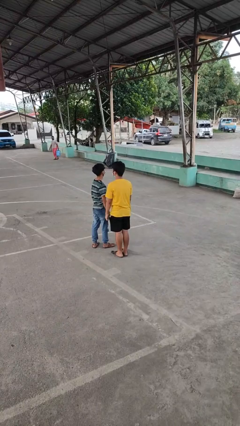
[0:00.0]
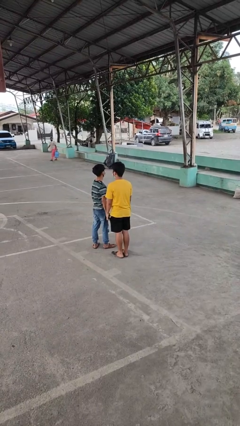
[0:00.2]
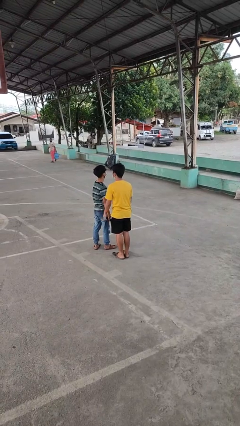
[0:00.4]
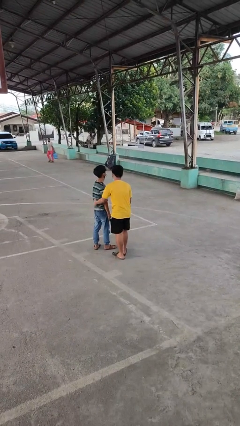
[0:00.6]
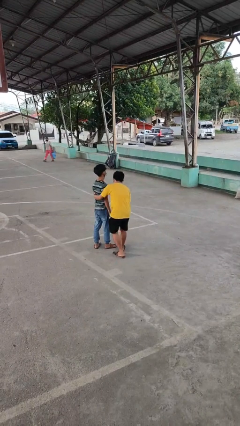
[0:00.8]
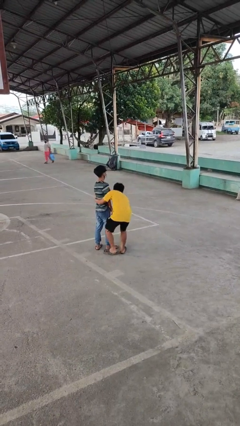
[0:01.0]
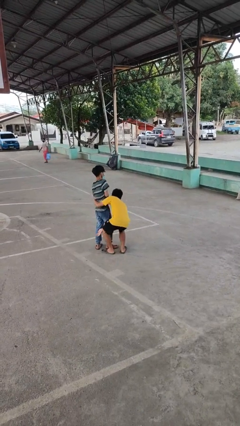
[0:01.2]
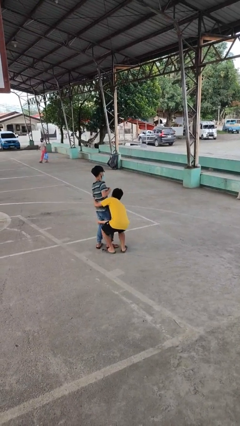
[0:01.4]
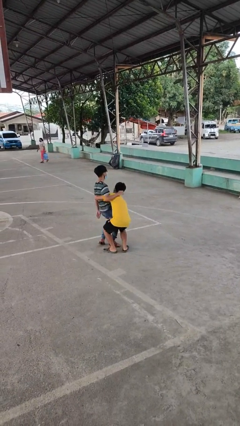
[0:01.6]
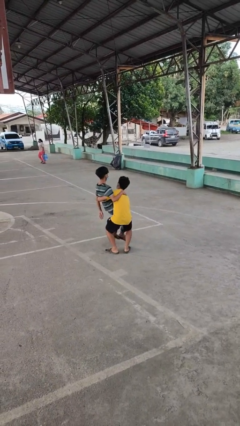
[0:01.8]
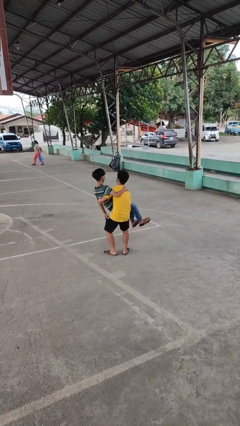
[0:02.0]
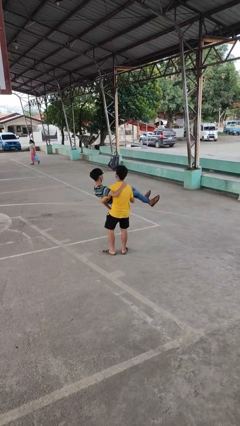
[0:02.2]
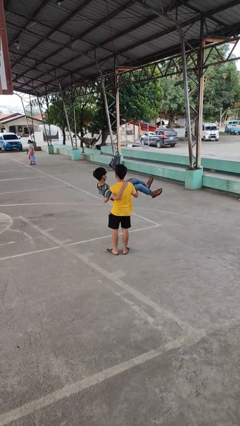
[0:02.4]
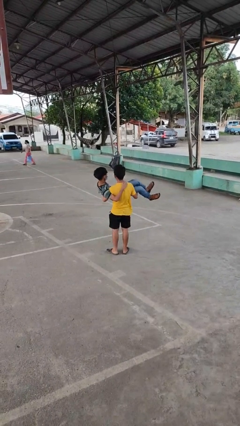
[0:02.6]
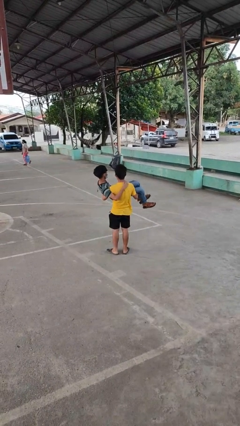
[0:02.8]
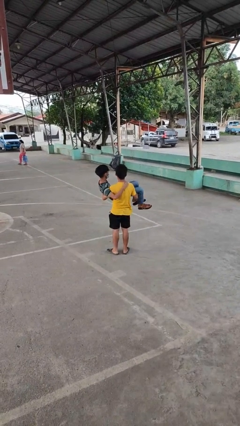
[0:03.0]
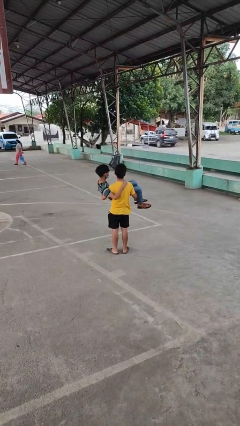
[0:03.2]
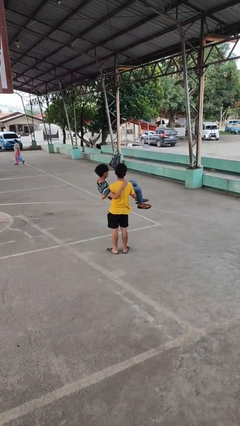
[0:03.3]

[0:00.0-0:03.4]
person picks up person

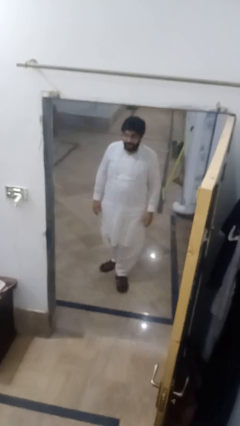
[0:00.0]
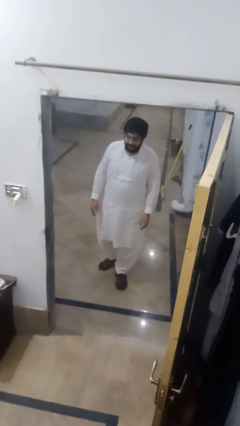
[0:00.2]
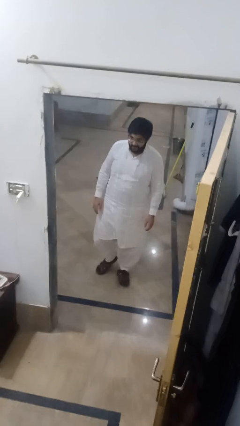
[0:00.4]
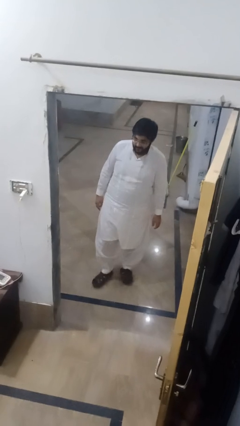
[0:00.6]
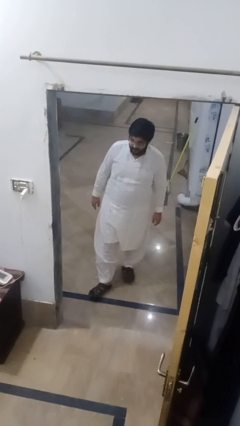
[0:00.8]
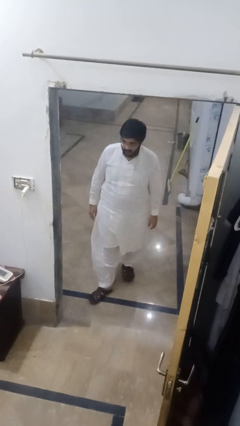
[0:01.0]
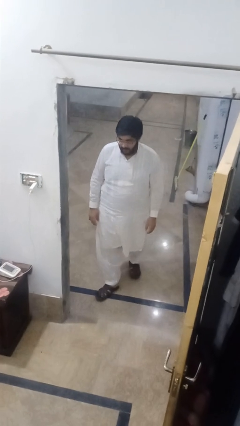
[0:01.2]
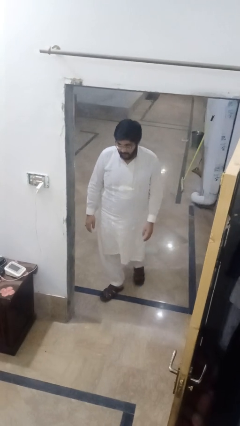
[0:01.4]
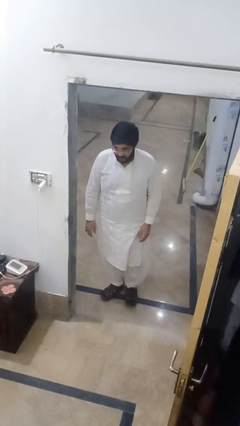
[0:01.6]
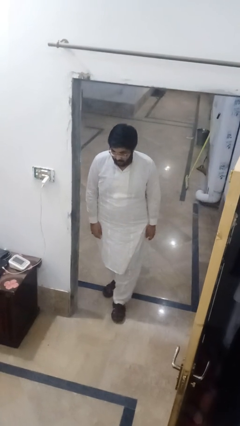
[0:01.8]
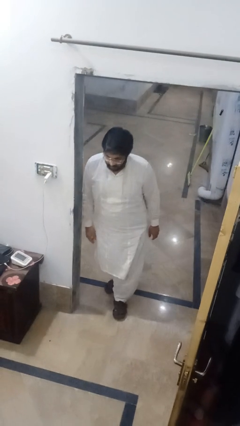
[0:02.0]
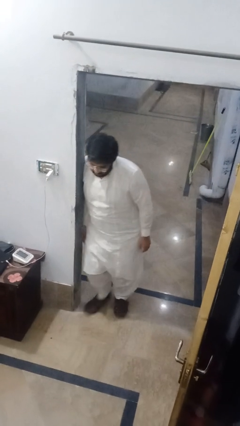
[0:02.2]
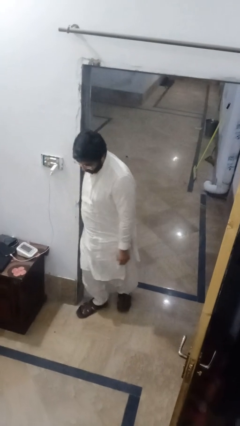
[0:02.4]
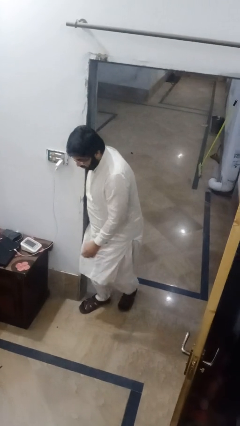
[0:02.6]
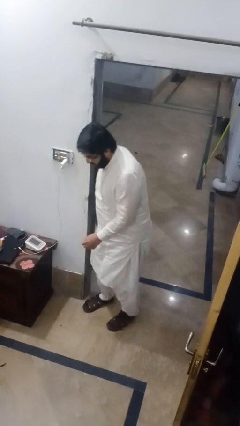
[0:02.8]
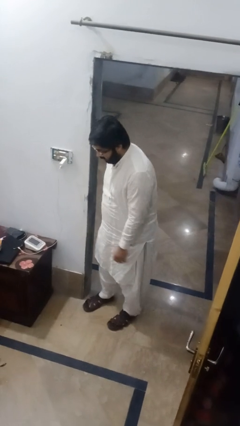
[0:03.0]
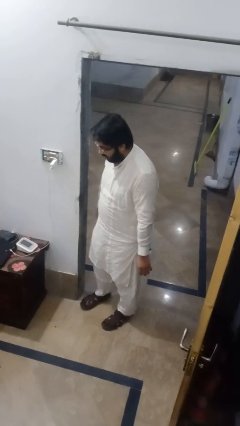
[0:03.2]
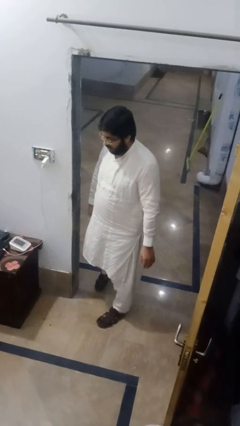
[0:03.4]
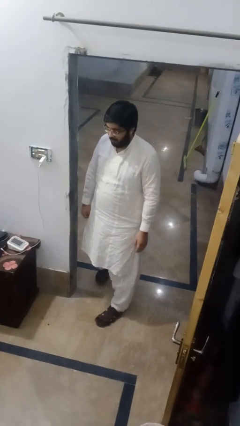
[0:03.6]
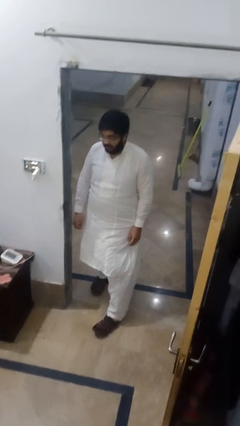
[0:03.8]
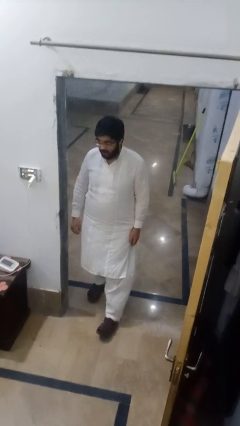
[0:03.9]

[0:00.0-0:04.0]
person bumps into wall

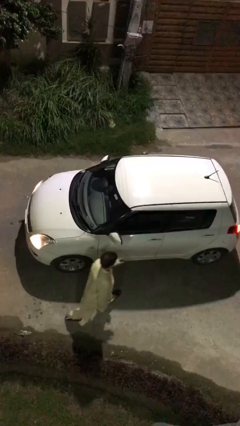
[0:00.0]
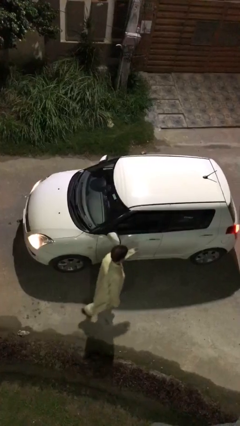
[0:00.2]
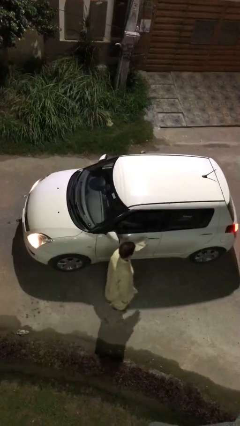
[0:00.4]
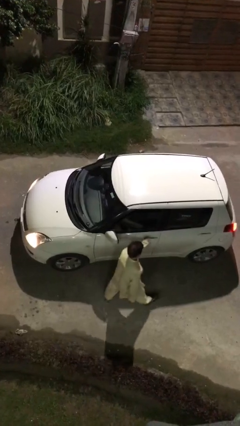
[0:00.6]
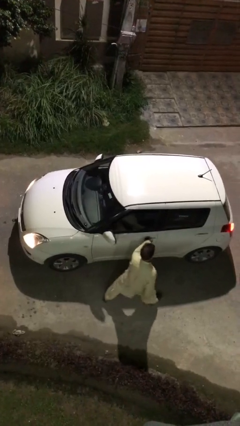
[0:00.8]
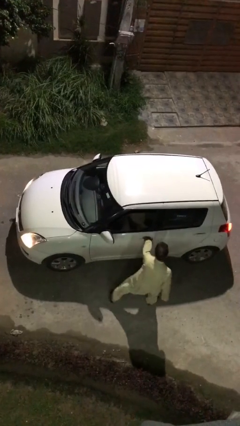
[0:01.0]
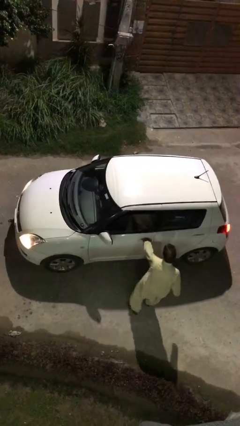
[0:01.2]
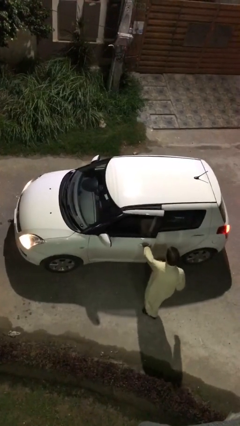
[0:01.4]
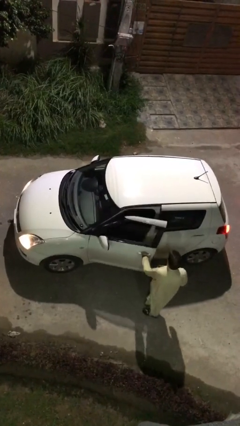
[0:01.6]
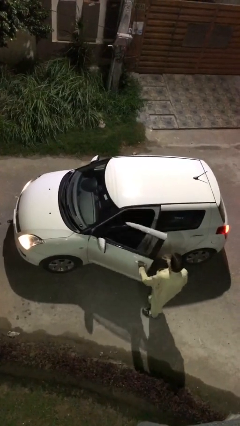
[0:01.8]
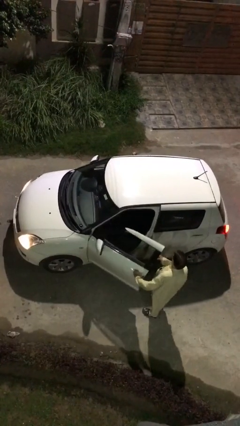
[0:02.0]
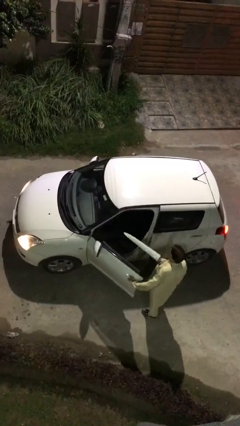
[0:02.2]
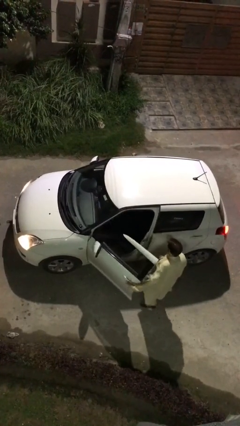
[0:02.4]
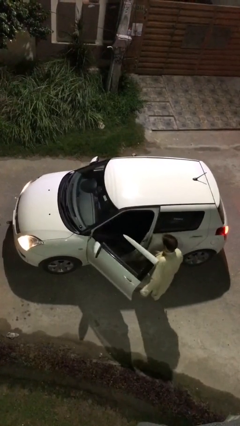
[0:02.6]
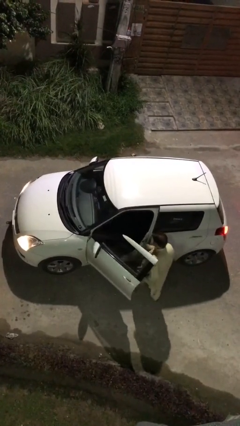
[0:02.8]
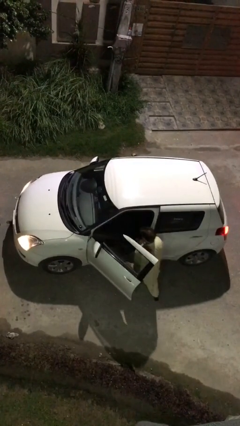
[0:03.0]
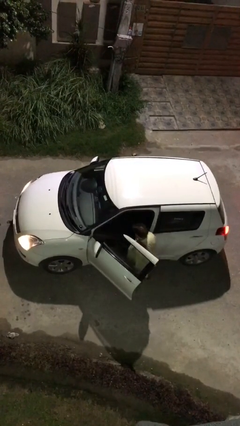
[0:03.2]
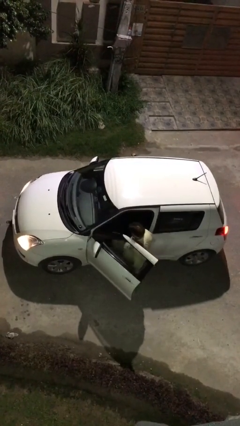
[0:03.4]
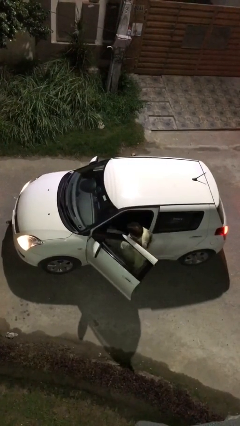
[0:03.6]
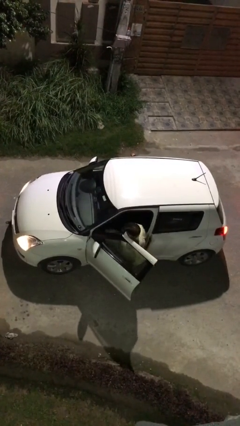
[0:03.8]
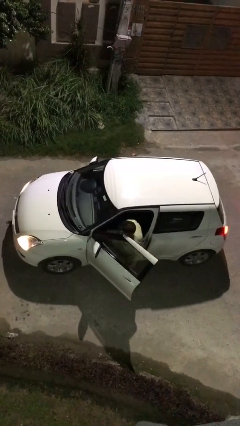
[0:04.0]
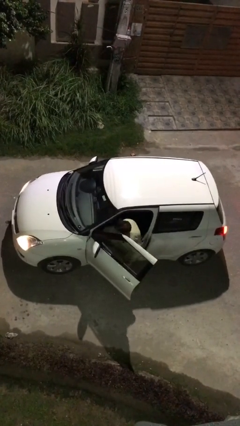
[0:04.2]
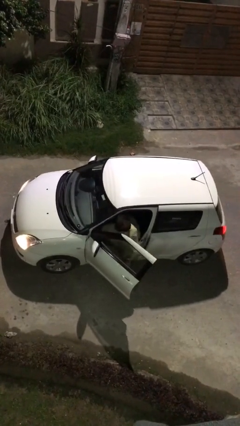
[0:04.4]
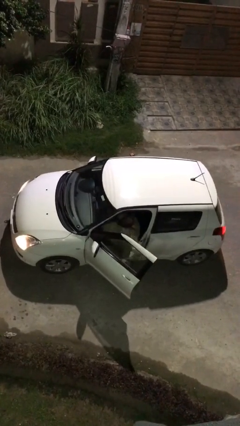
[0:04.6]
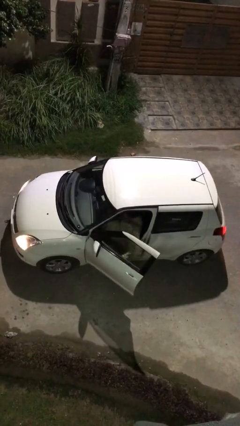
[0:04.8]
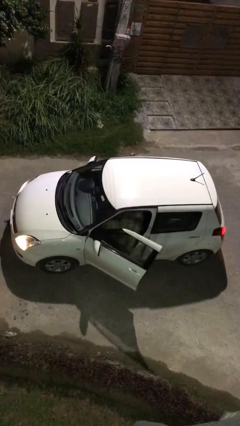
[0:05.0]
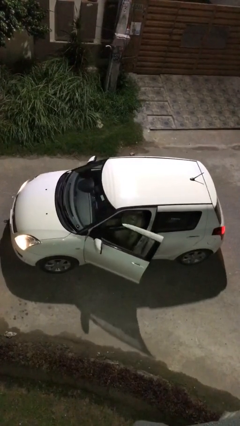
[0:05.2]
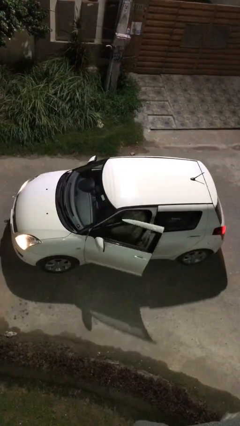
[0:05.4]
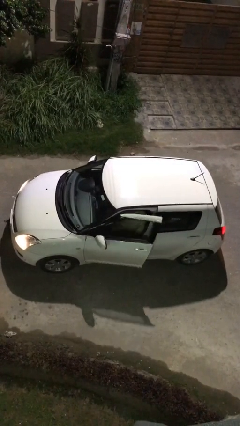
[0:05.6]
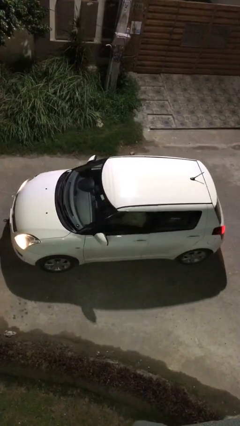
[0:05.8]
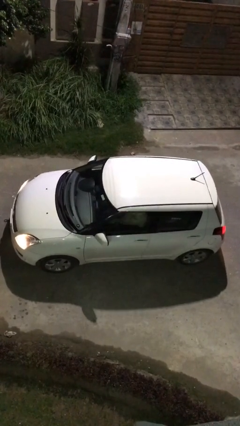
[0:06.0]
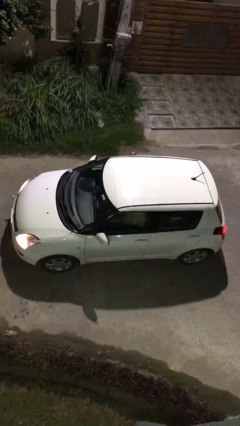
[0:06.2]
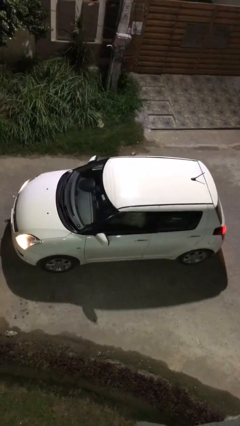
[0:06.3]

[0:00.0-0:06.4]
car picks up person

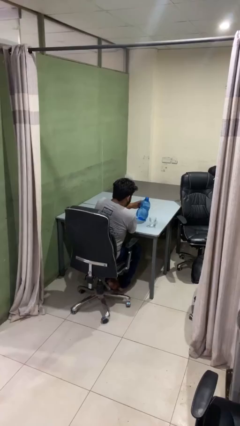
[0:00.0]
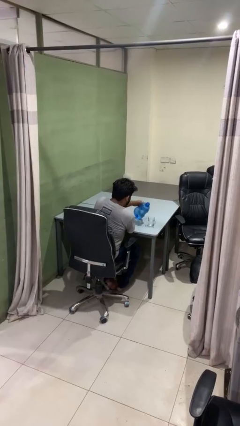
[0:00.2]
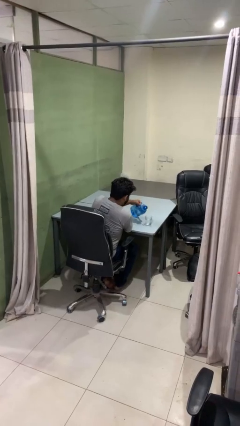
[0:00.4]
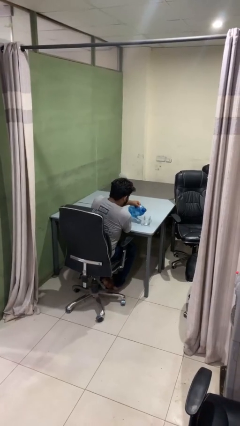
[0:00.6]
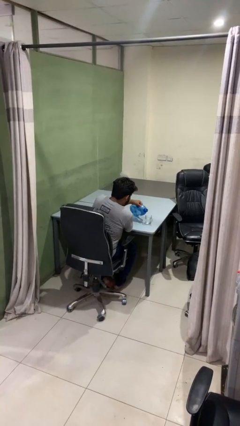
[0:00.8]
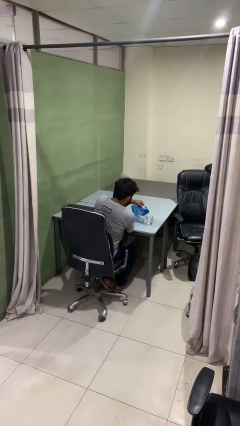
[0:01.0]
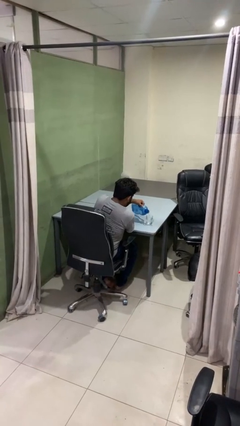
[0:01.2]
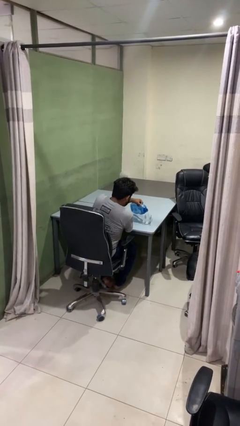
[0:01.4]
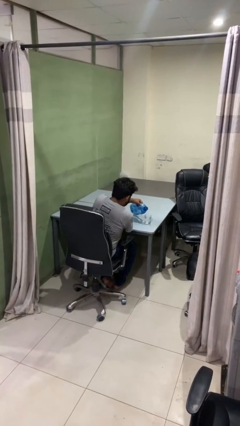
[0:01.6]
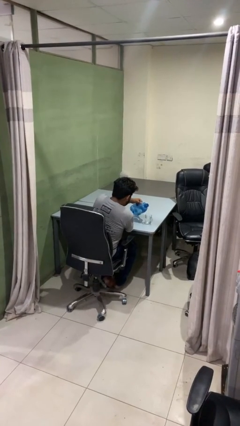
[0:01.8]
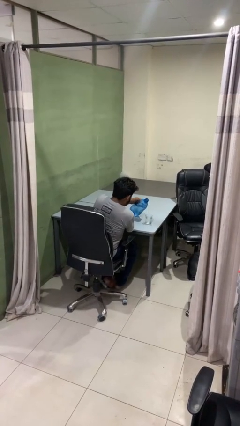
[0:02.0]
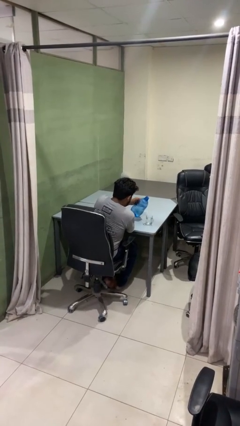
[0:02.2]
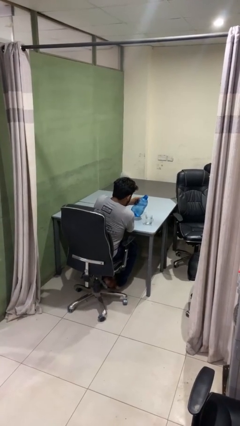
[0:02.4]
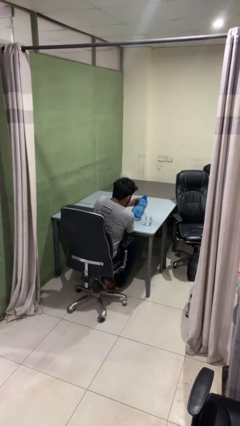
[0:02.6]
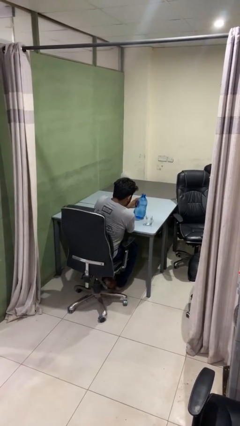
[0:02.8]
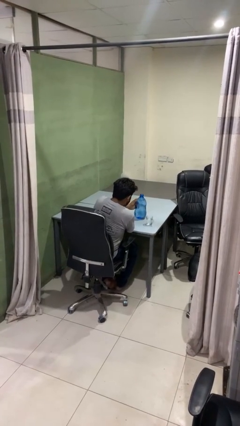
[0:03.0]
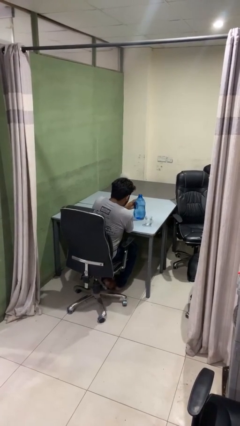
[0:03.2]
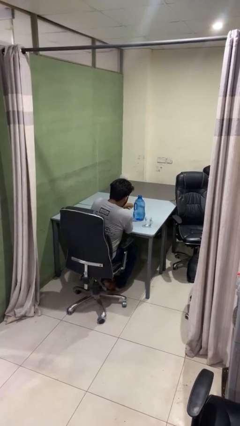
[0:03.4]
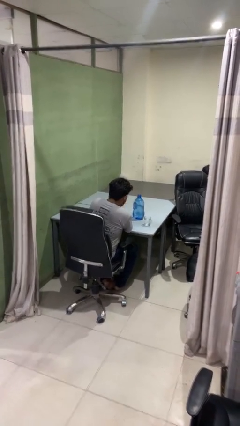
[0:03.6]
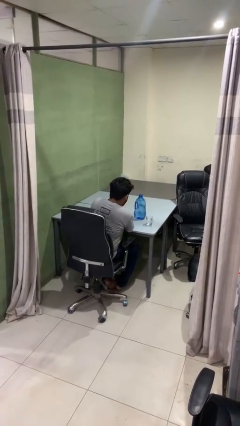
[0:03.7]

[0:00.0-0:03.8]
person pours liquid into cup
